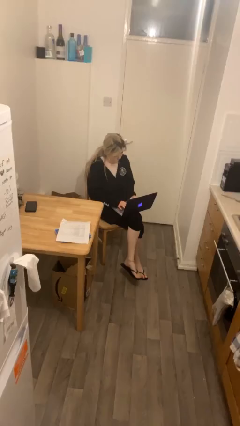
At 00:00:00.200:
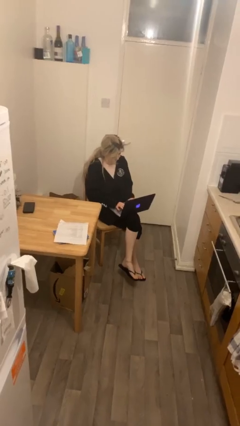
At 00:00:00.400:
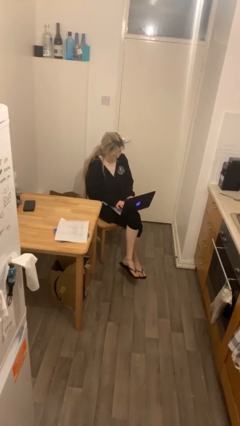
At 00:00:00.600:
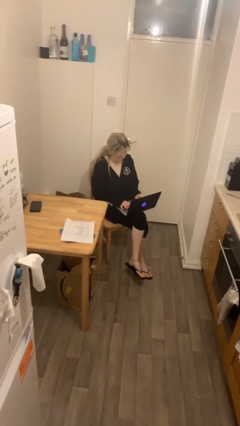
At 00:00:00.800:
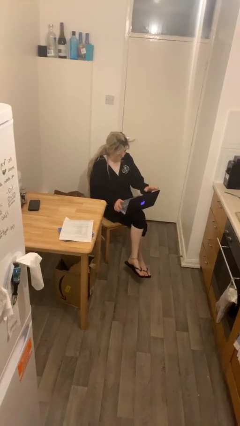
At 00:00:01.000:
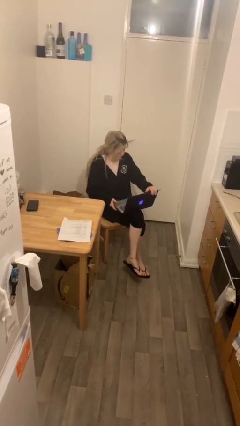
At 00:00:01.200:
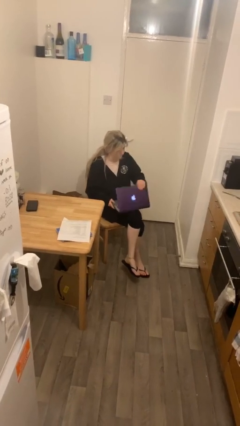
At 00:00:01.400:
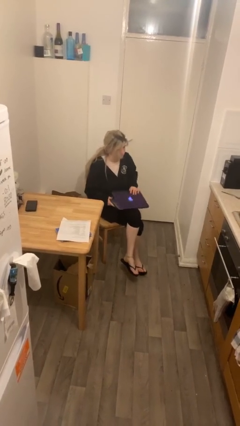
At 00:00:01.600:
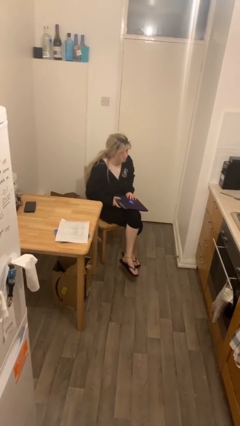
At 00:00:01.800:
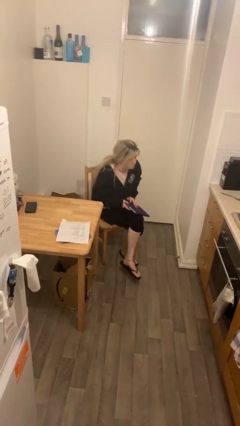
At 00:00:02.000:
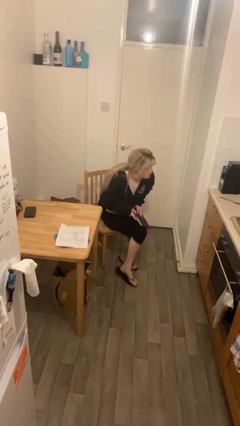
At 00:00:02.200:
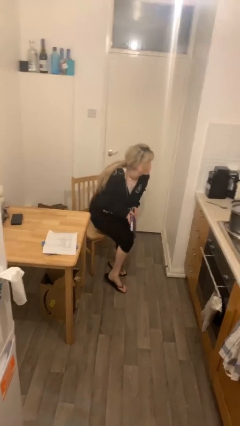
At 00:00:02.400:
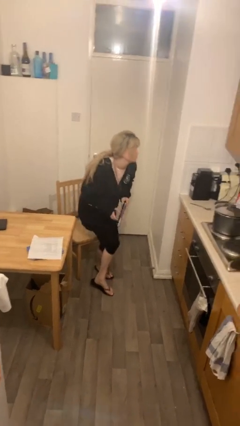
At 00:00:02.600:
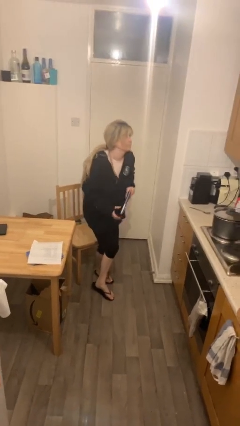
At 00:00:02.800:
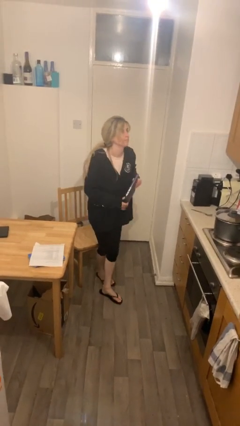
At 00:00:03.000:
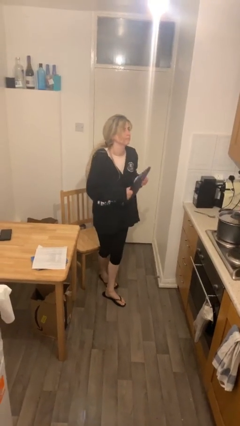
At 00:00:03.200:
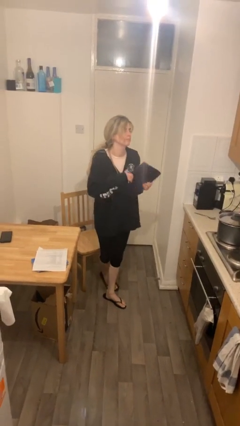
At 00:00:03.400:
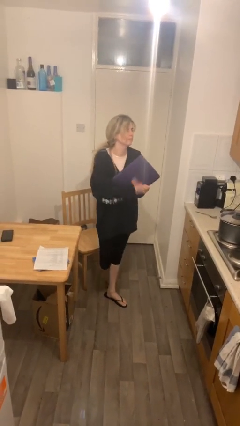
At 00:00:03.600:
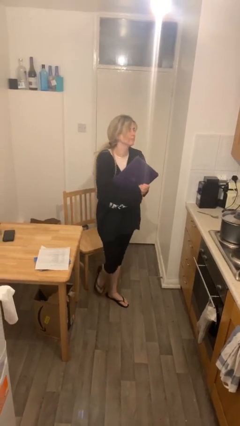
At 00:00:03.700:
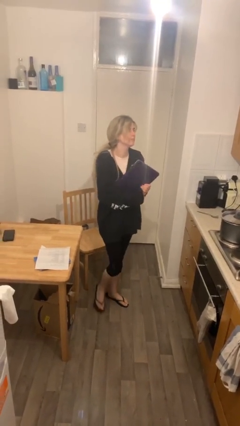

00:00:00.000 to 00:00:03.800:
person stands up

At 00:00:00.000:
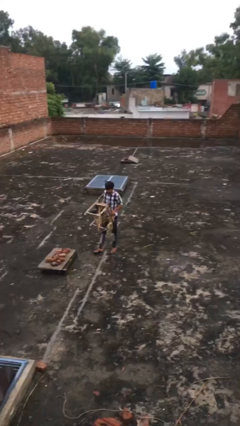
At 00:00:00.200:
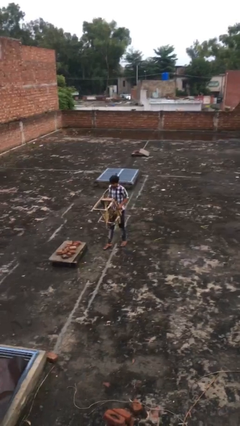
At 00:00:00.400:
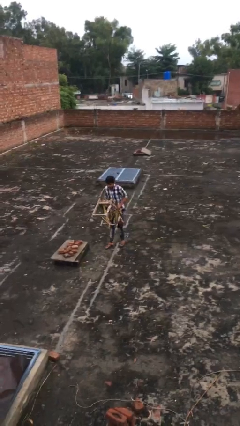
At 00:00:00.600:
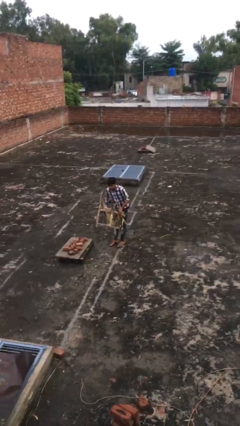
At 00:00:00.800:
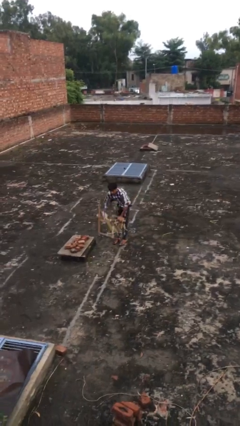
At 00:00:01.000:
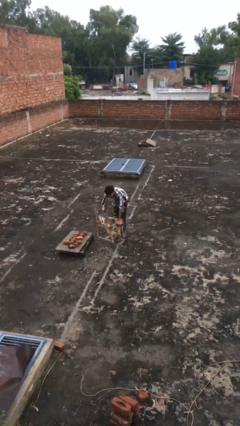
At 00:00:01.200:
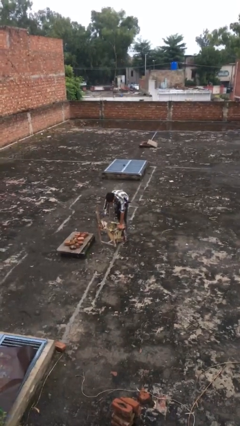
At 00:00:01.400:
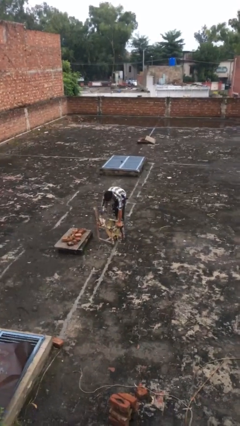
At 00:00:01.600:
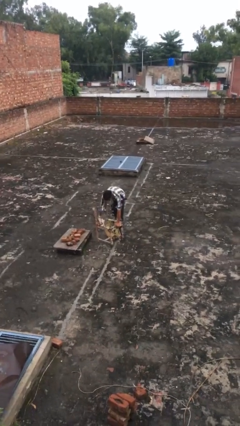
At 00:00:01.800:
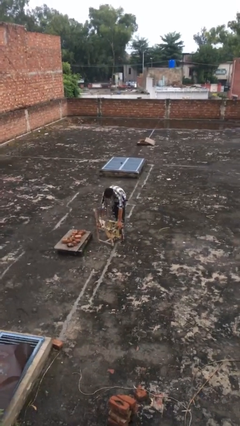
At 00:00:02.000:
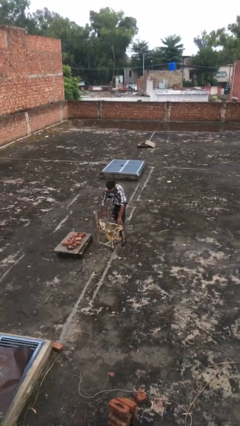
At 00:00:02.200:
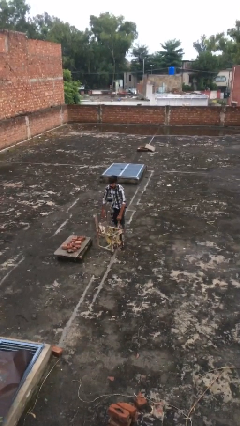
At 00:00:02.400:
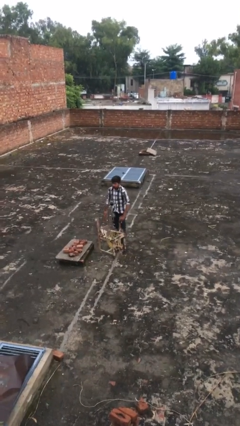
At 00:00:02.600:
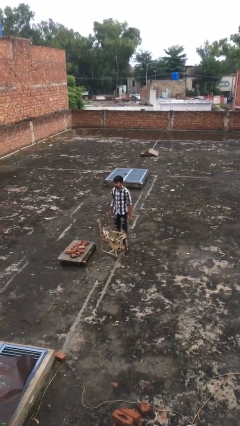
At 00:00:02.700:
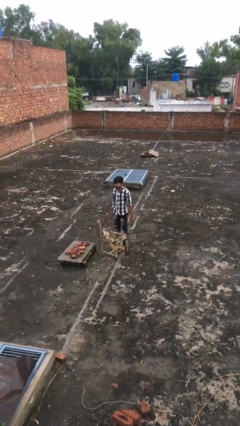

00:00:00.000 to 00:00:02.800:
person puts down object on floor

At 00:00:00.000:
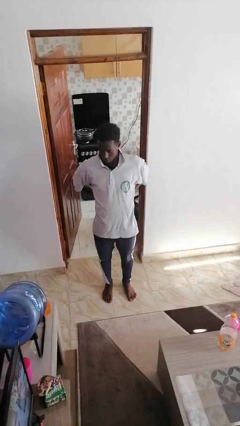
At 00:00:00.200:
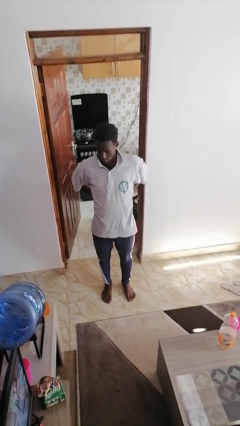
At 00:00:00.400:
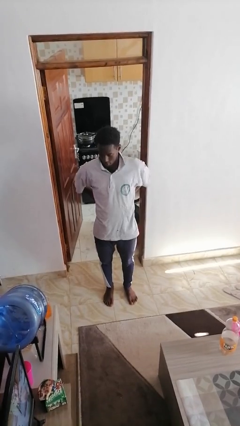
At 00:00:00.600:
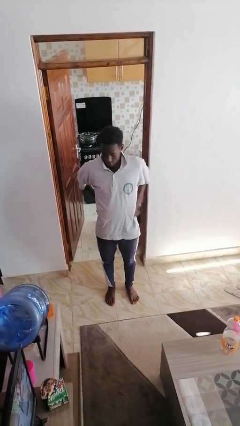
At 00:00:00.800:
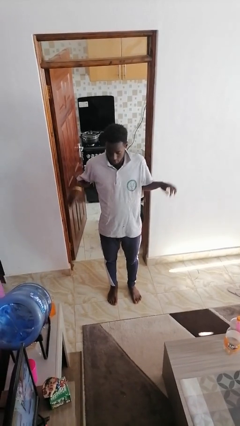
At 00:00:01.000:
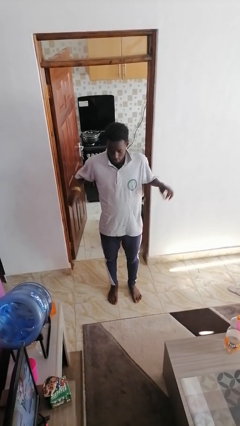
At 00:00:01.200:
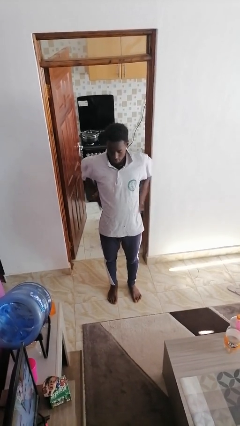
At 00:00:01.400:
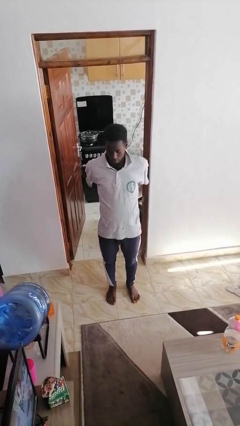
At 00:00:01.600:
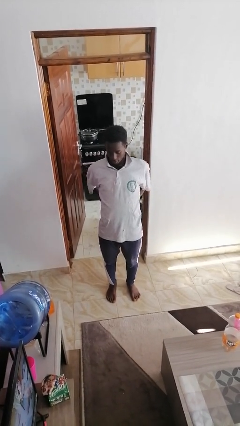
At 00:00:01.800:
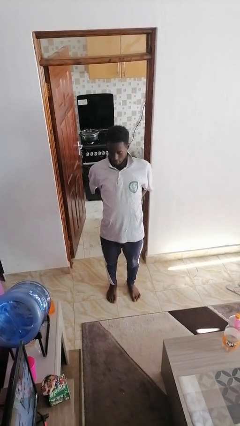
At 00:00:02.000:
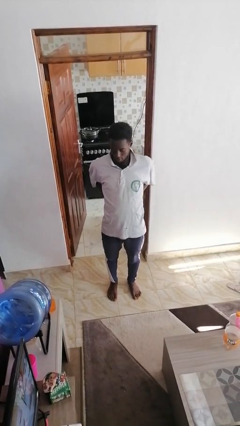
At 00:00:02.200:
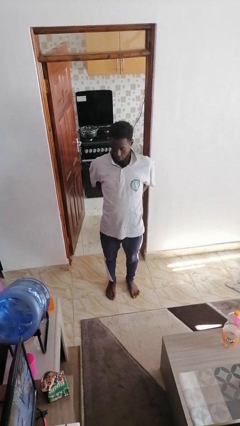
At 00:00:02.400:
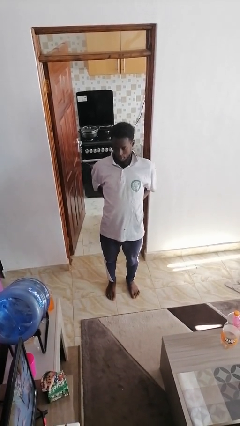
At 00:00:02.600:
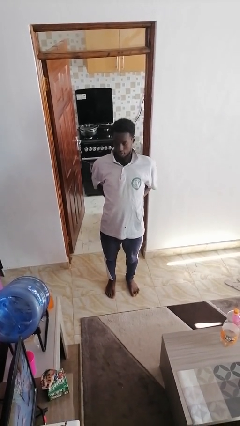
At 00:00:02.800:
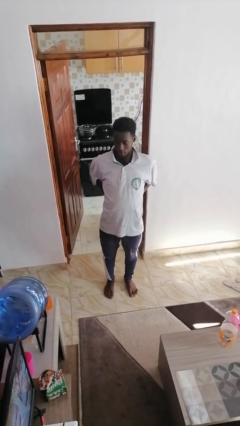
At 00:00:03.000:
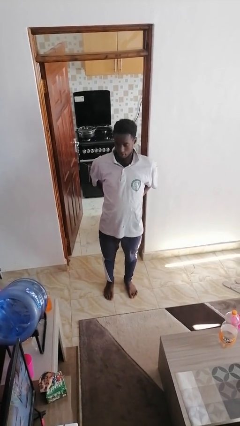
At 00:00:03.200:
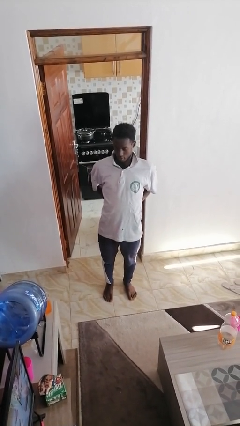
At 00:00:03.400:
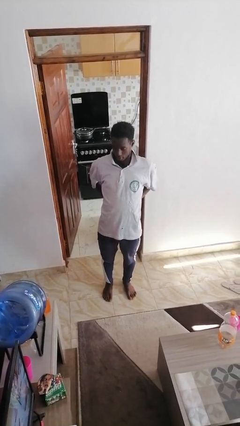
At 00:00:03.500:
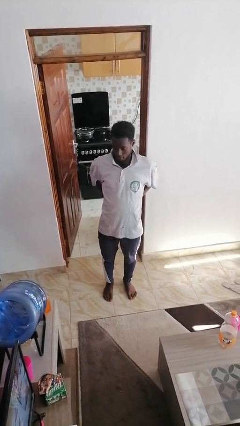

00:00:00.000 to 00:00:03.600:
person stretches back

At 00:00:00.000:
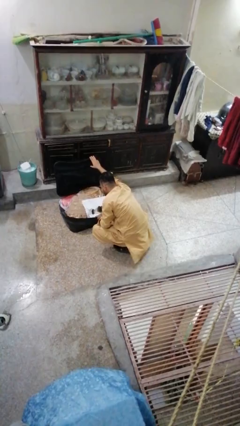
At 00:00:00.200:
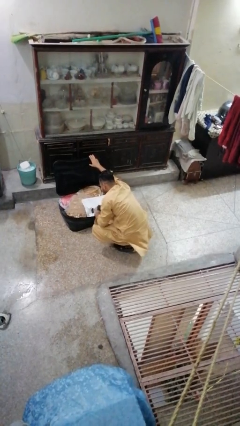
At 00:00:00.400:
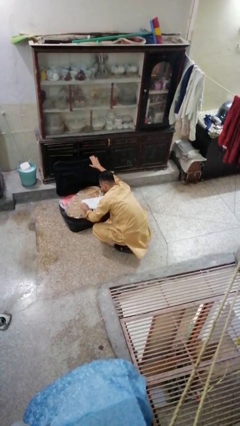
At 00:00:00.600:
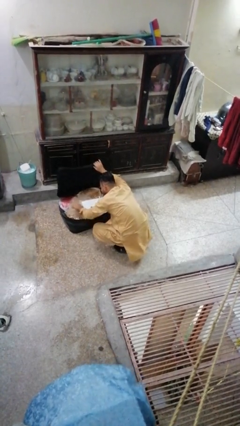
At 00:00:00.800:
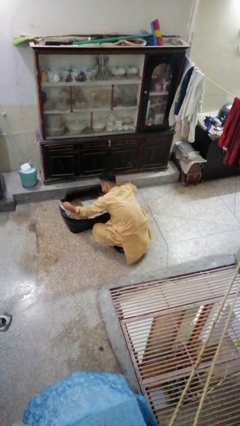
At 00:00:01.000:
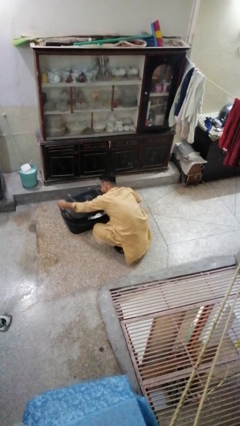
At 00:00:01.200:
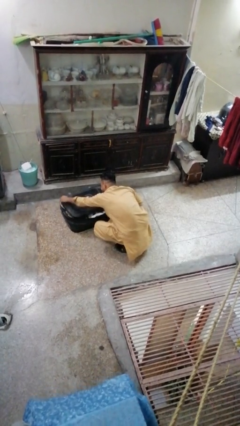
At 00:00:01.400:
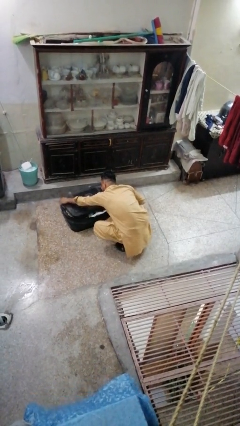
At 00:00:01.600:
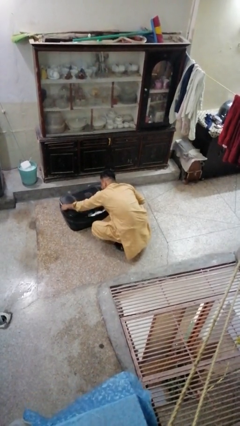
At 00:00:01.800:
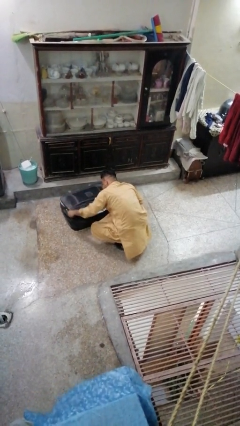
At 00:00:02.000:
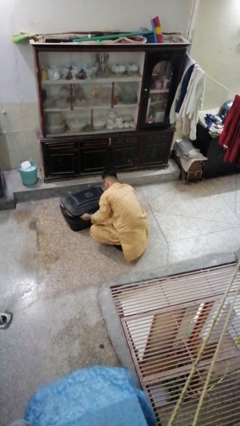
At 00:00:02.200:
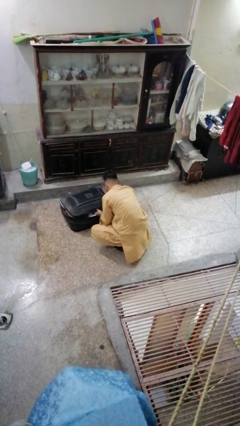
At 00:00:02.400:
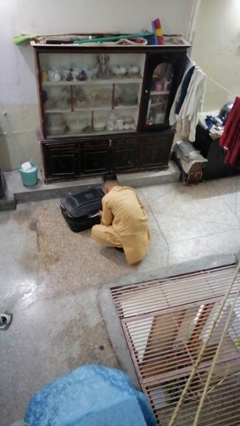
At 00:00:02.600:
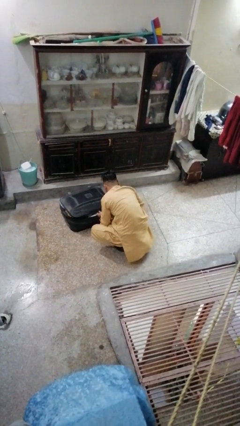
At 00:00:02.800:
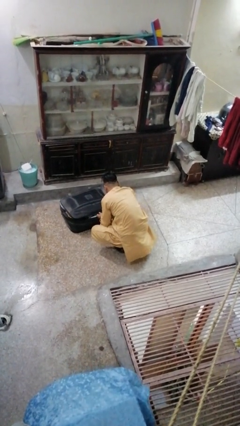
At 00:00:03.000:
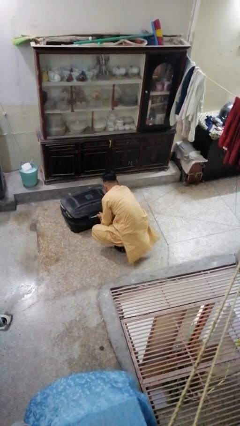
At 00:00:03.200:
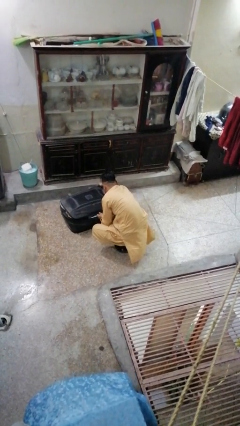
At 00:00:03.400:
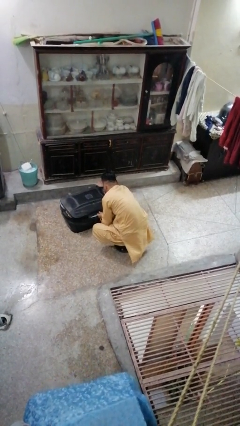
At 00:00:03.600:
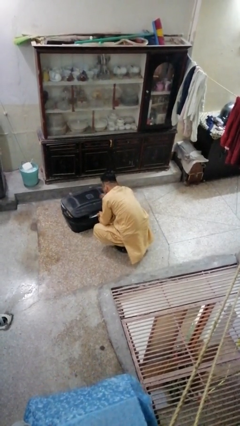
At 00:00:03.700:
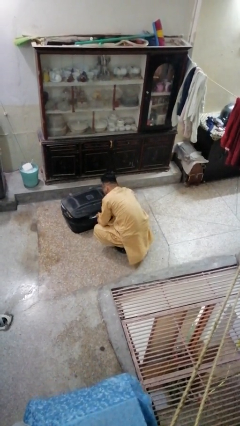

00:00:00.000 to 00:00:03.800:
person closes suitcase

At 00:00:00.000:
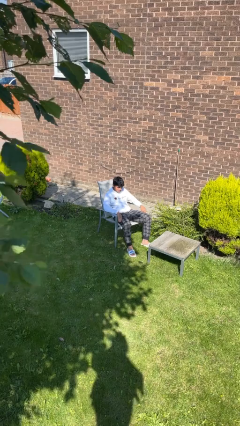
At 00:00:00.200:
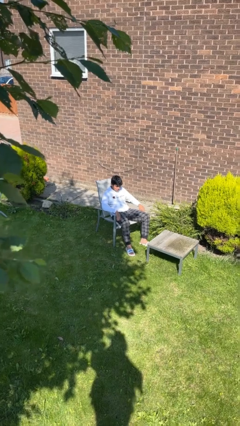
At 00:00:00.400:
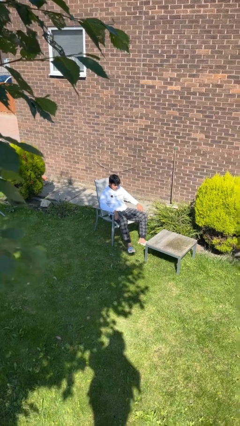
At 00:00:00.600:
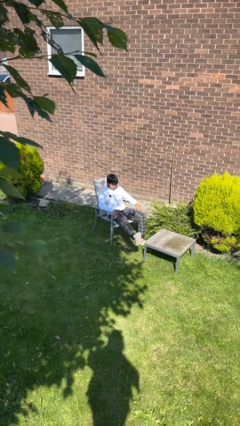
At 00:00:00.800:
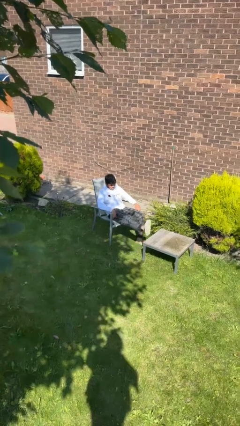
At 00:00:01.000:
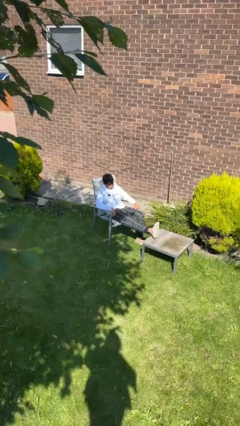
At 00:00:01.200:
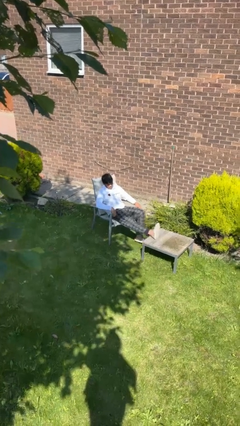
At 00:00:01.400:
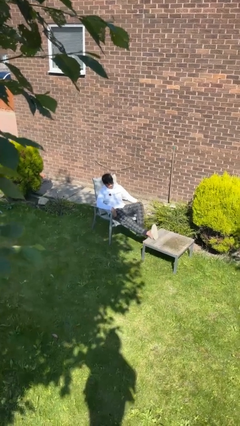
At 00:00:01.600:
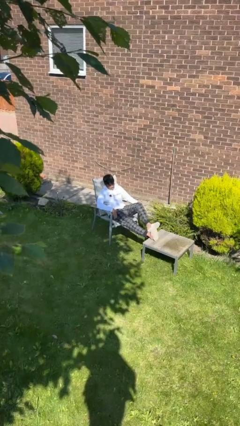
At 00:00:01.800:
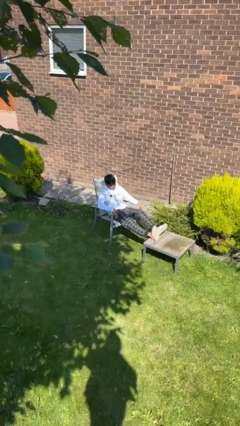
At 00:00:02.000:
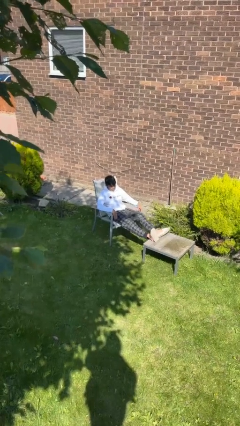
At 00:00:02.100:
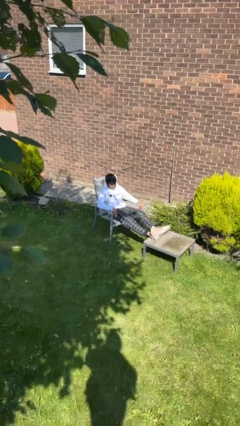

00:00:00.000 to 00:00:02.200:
person puts feet up

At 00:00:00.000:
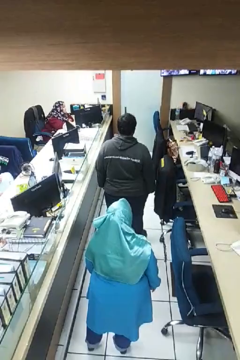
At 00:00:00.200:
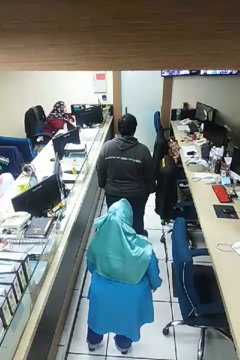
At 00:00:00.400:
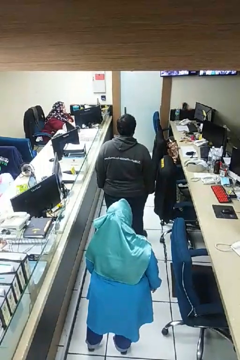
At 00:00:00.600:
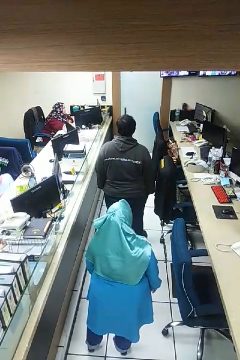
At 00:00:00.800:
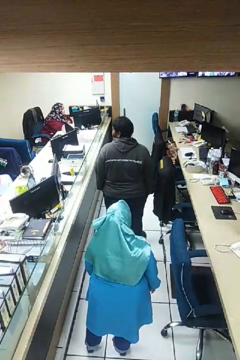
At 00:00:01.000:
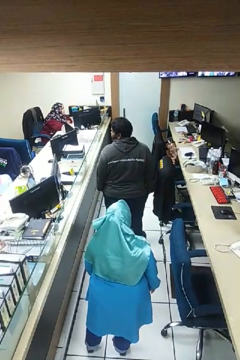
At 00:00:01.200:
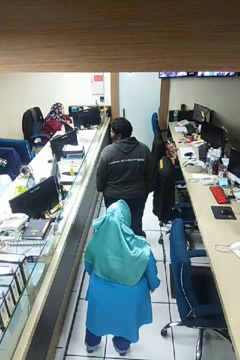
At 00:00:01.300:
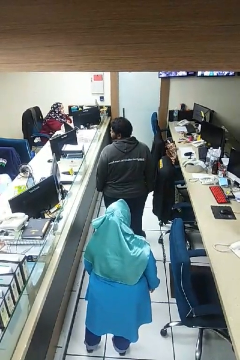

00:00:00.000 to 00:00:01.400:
person looks over shoulder
